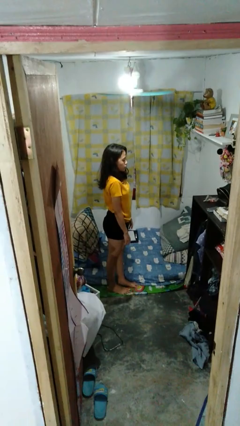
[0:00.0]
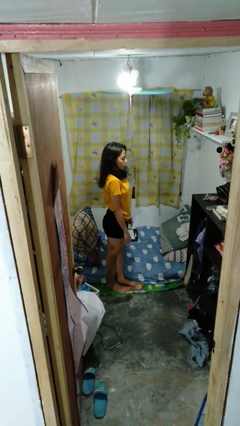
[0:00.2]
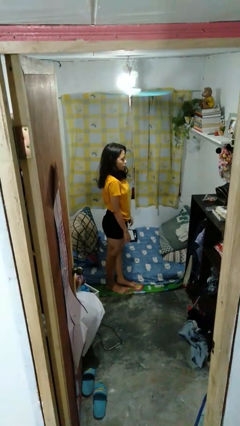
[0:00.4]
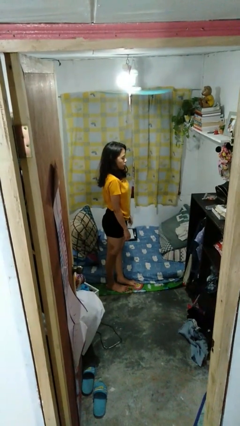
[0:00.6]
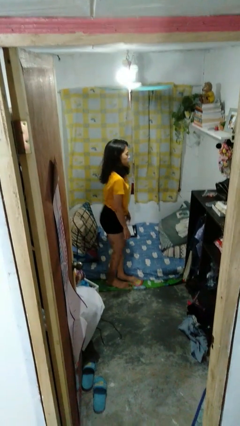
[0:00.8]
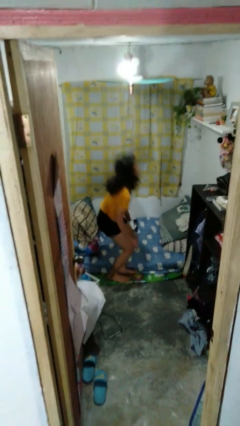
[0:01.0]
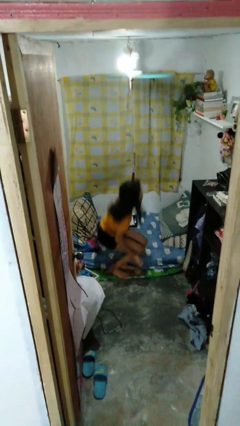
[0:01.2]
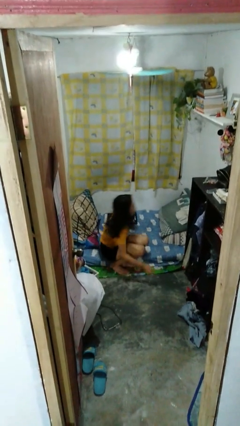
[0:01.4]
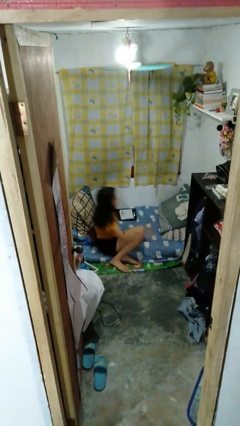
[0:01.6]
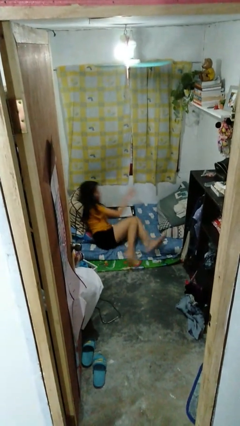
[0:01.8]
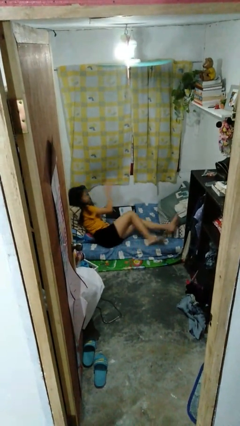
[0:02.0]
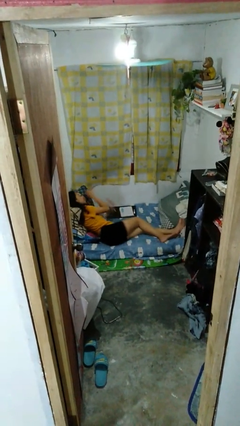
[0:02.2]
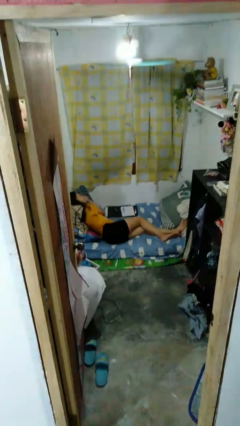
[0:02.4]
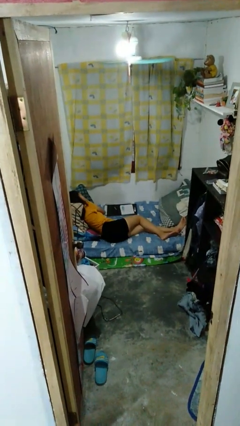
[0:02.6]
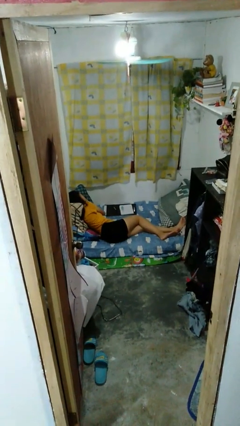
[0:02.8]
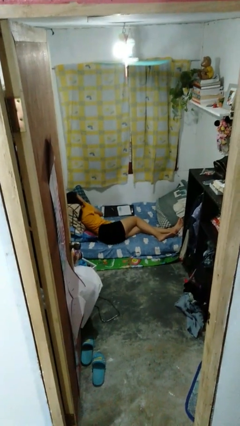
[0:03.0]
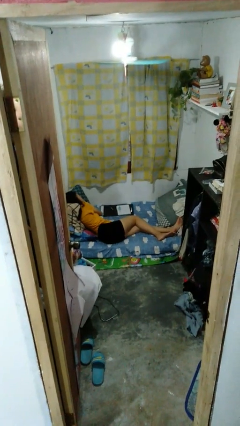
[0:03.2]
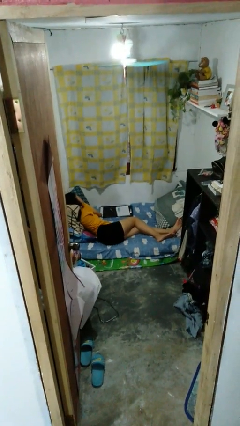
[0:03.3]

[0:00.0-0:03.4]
person lies down on bed

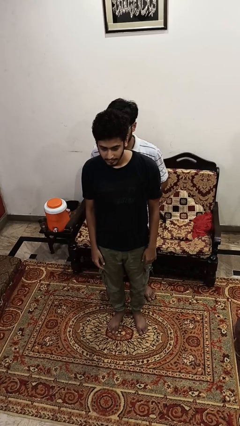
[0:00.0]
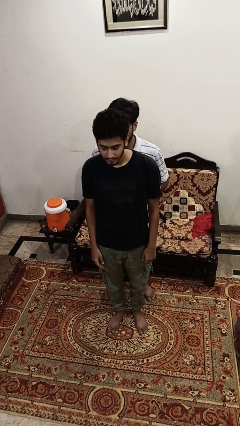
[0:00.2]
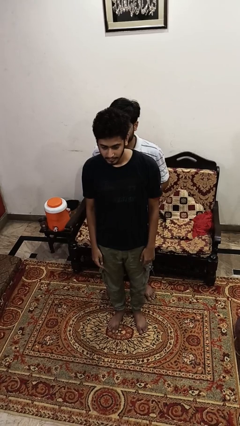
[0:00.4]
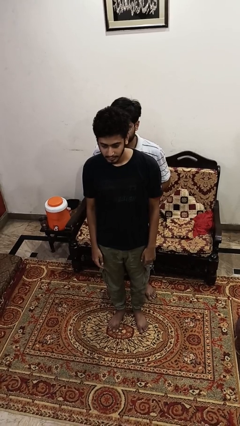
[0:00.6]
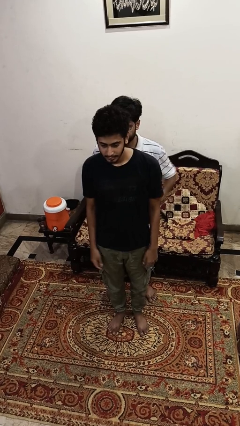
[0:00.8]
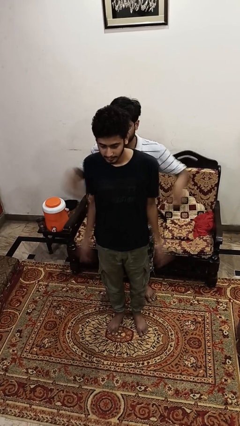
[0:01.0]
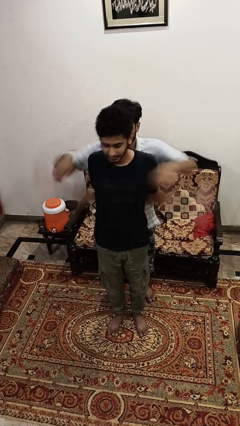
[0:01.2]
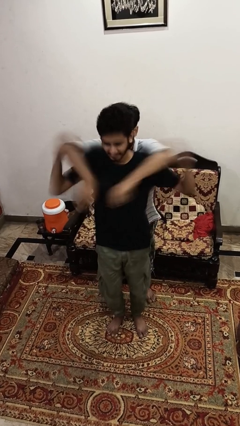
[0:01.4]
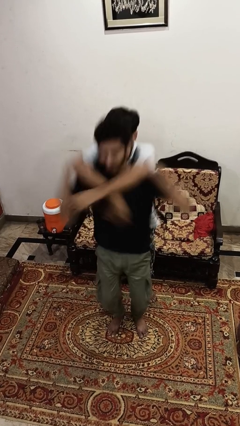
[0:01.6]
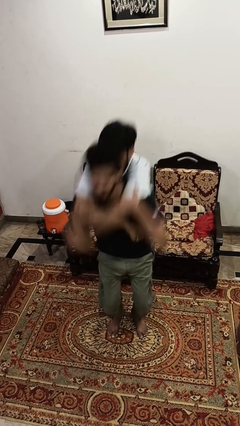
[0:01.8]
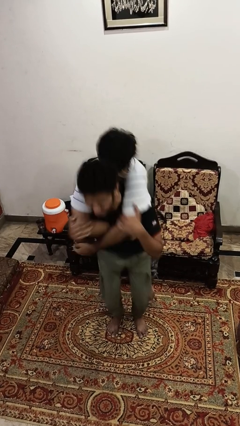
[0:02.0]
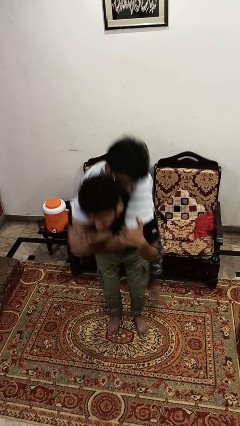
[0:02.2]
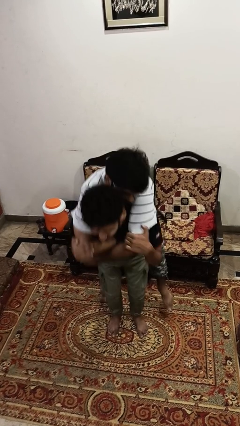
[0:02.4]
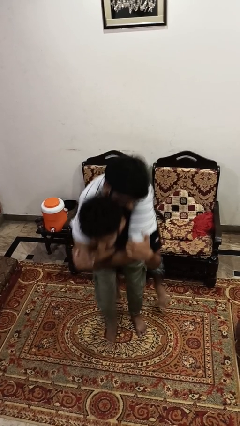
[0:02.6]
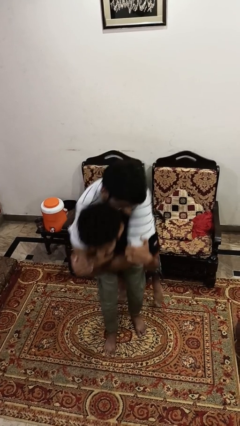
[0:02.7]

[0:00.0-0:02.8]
person carries person over shoulder

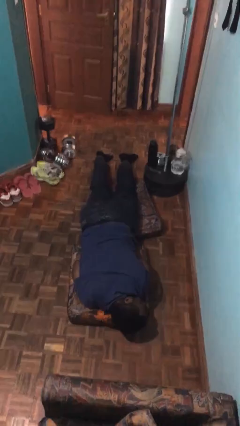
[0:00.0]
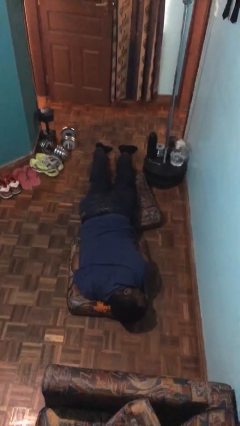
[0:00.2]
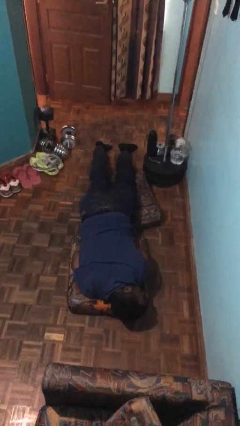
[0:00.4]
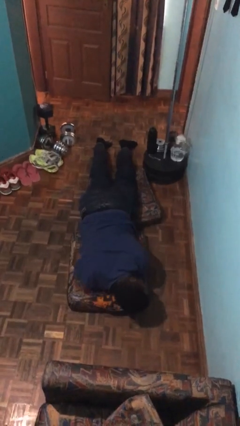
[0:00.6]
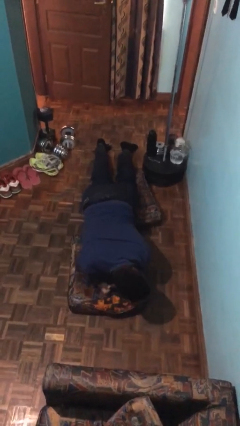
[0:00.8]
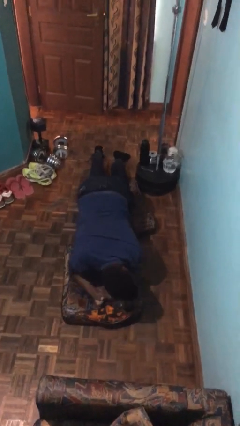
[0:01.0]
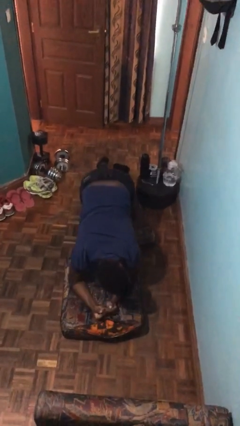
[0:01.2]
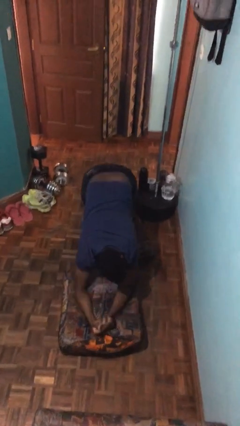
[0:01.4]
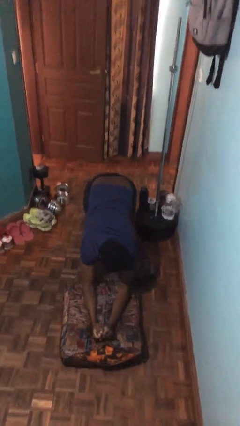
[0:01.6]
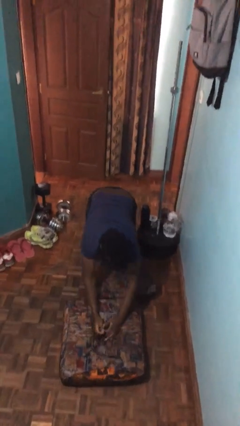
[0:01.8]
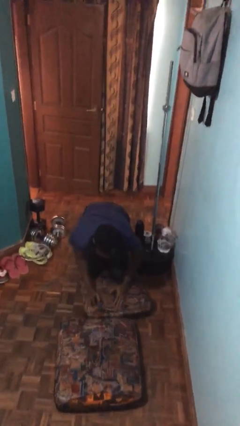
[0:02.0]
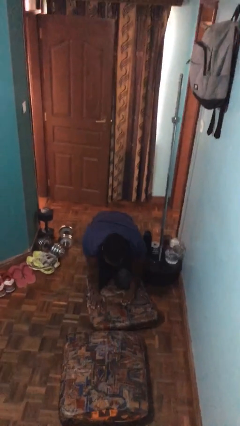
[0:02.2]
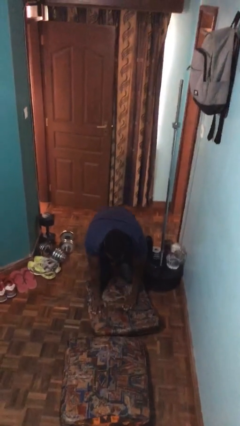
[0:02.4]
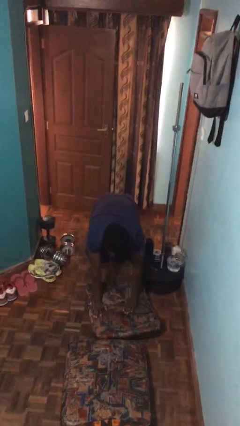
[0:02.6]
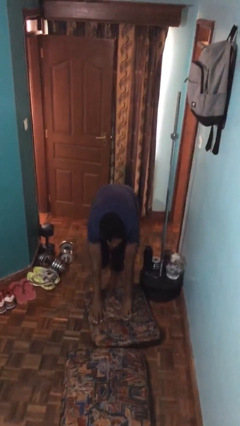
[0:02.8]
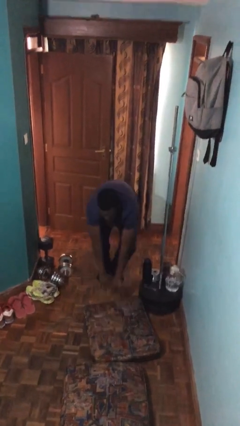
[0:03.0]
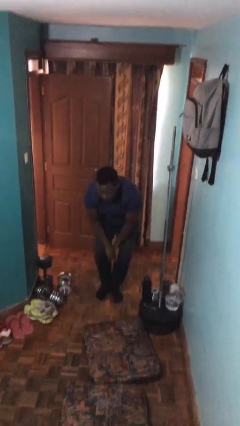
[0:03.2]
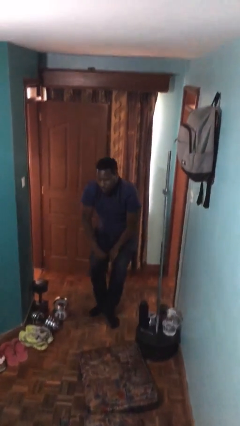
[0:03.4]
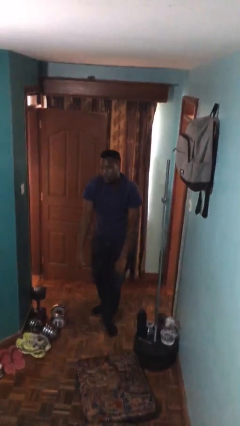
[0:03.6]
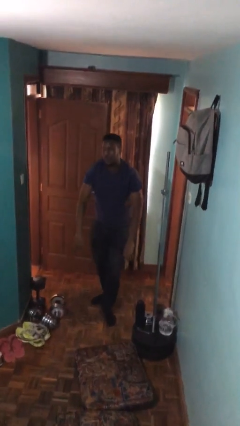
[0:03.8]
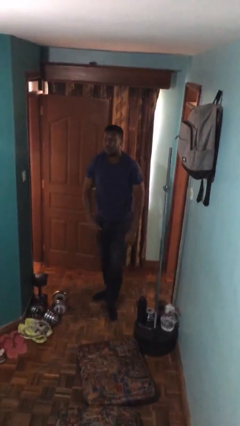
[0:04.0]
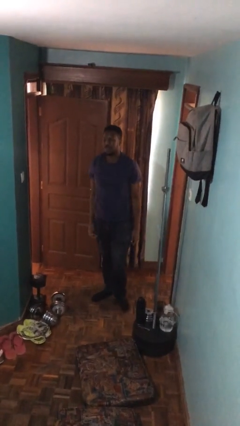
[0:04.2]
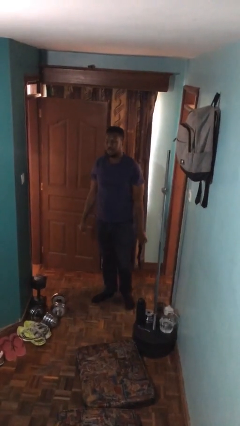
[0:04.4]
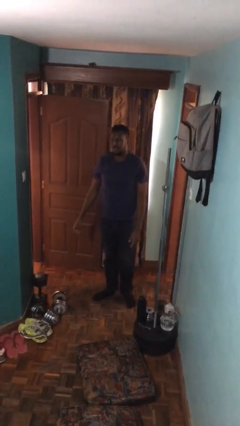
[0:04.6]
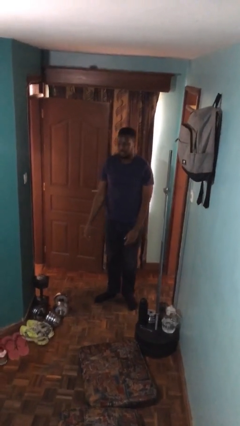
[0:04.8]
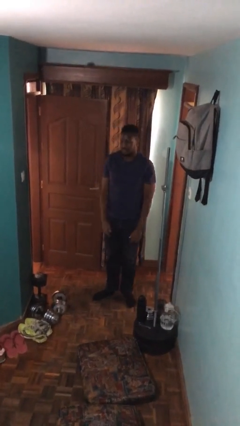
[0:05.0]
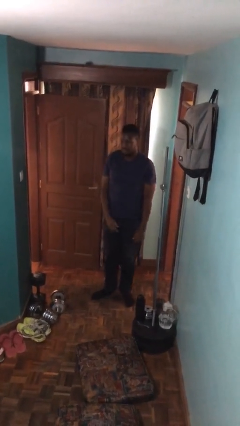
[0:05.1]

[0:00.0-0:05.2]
person stands up from floor

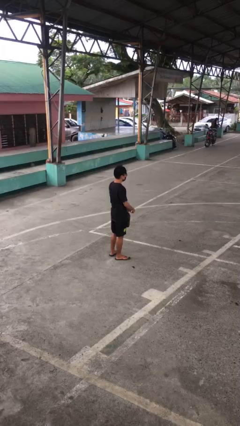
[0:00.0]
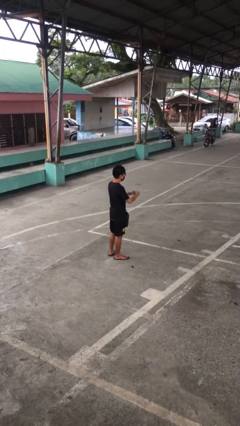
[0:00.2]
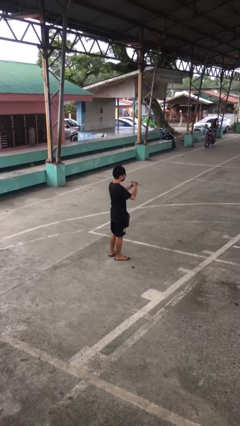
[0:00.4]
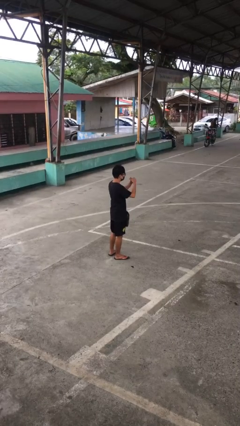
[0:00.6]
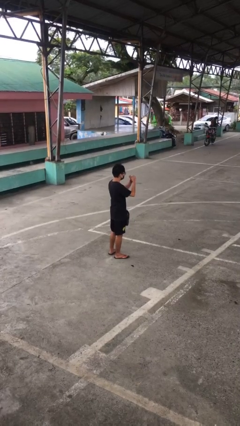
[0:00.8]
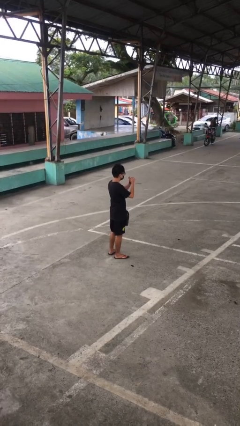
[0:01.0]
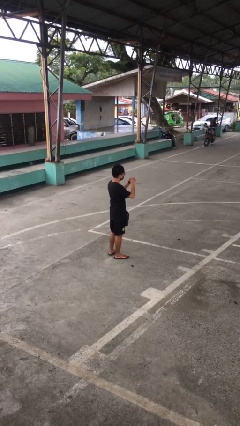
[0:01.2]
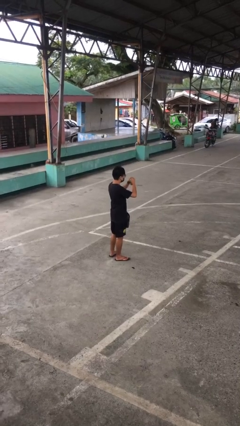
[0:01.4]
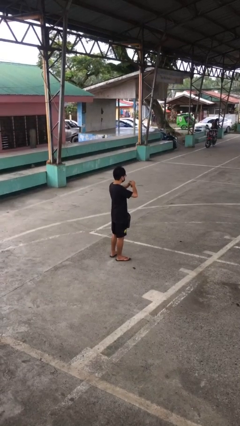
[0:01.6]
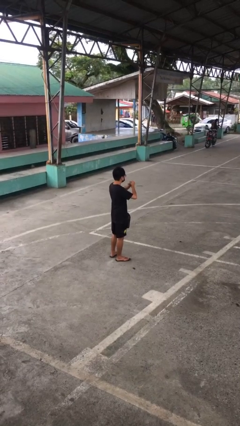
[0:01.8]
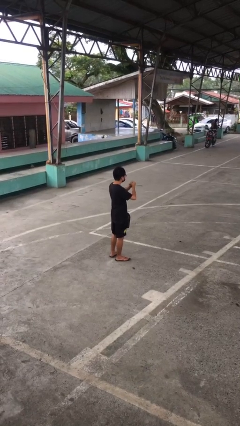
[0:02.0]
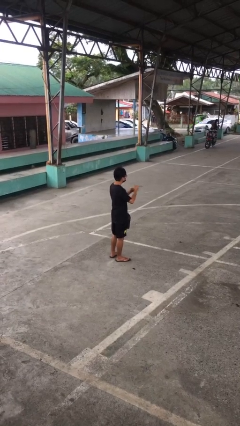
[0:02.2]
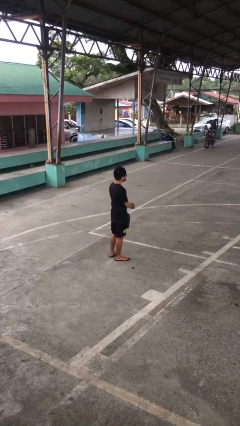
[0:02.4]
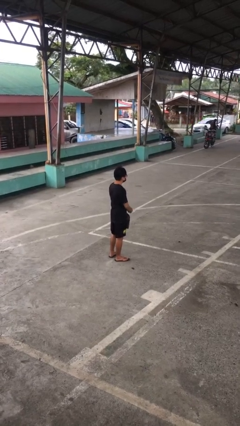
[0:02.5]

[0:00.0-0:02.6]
person cracks knuckles

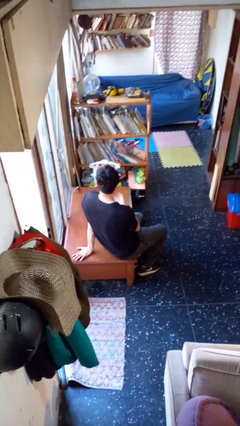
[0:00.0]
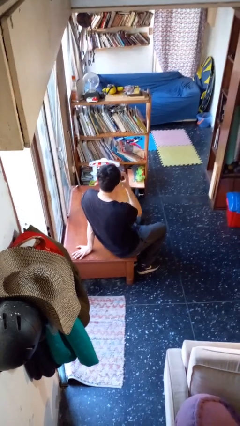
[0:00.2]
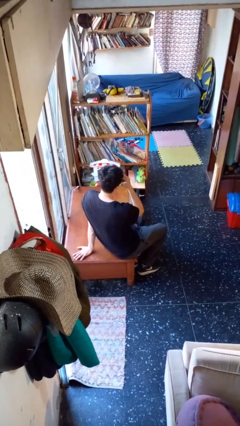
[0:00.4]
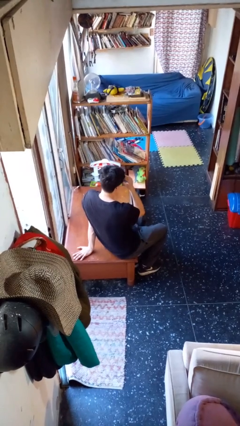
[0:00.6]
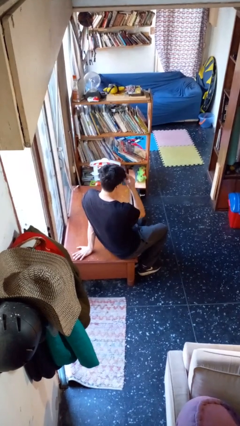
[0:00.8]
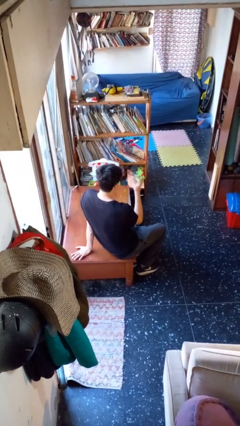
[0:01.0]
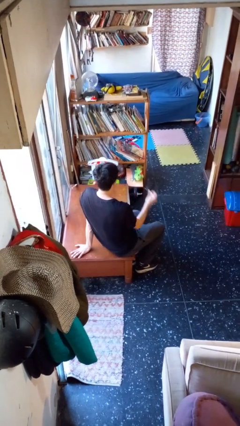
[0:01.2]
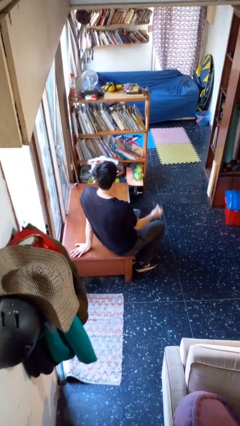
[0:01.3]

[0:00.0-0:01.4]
person takes off glasses

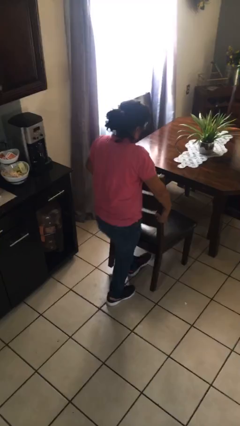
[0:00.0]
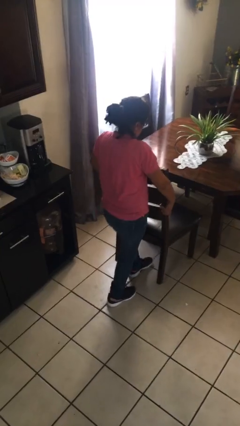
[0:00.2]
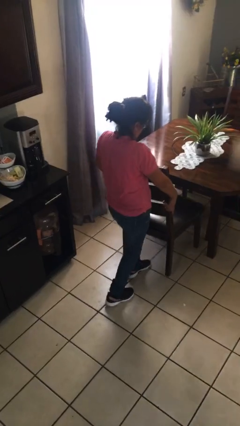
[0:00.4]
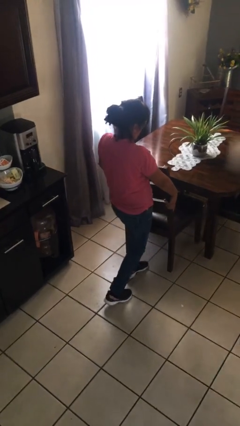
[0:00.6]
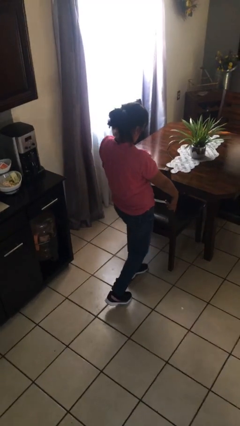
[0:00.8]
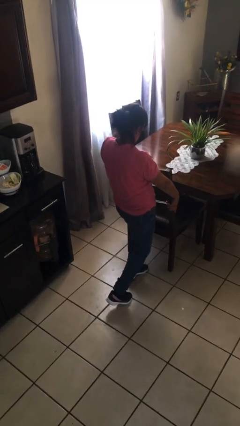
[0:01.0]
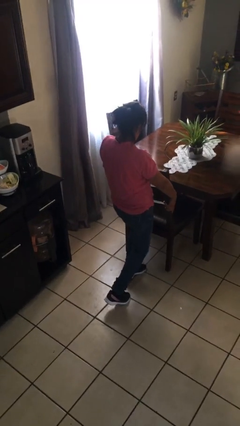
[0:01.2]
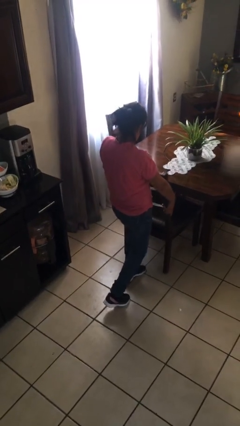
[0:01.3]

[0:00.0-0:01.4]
person pushes in chair

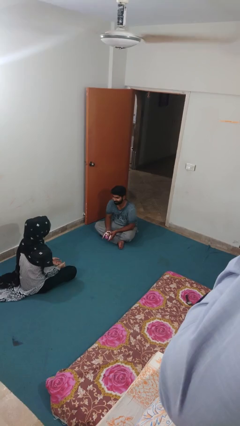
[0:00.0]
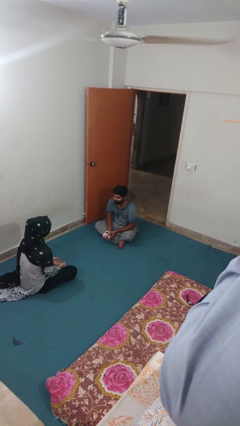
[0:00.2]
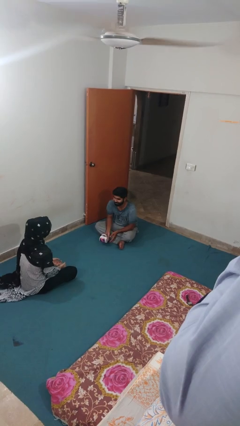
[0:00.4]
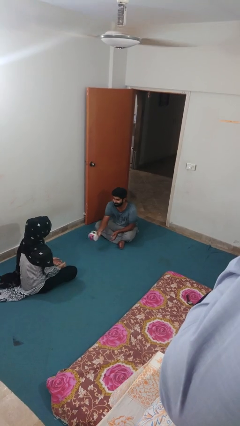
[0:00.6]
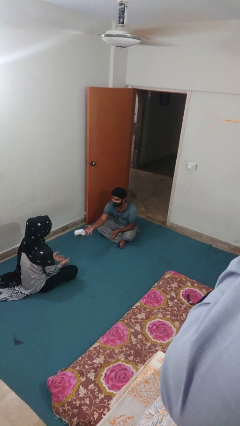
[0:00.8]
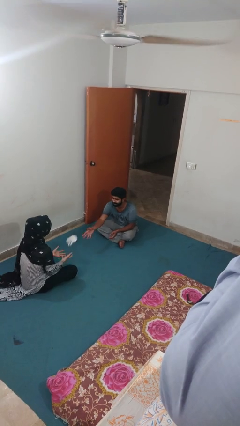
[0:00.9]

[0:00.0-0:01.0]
person throws object to person
